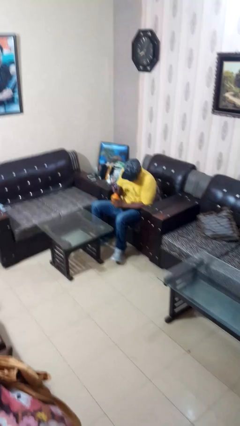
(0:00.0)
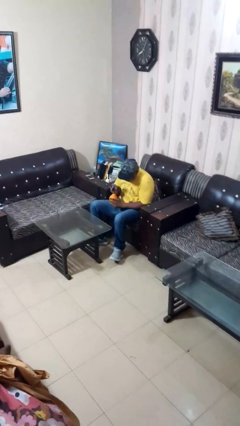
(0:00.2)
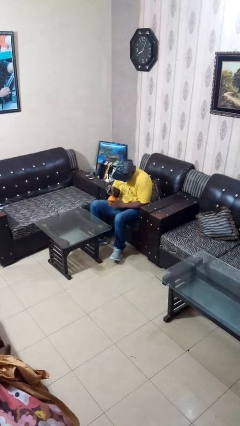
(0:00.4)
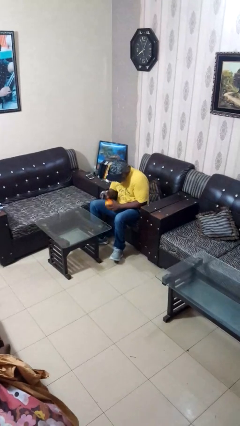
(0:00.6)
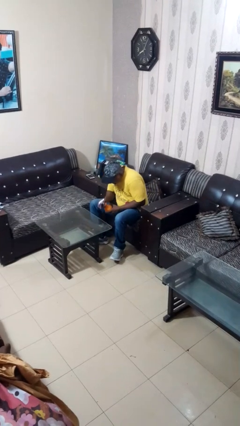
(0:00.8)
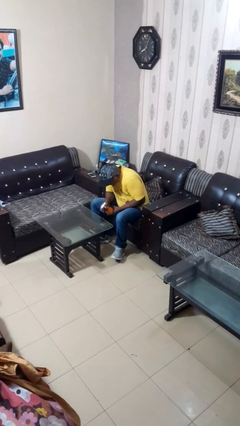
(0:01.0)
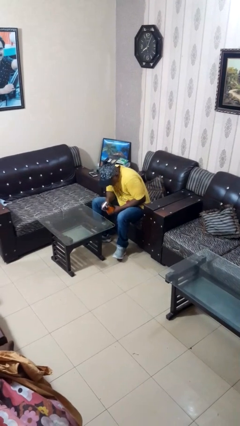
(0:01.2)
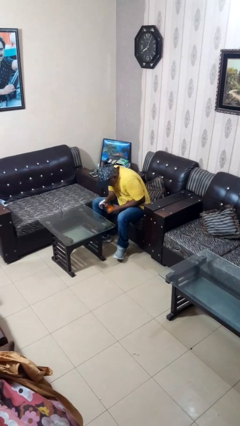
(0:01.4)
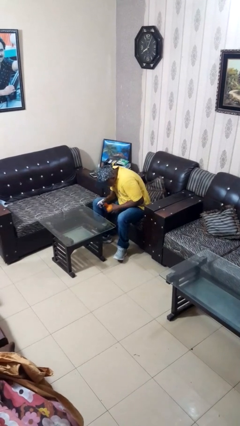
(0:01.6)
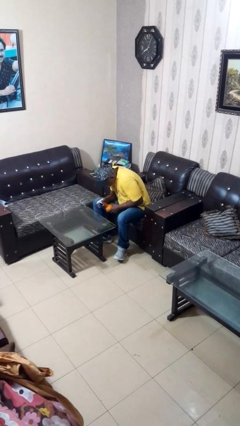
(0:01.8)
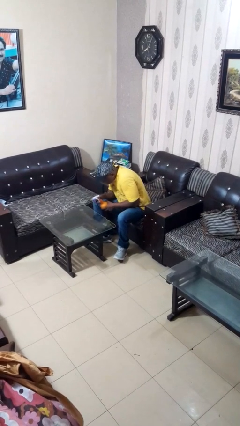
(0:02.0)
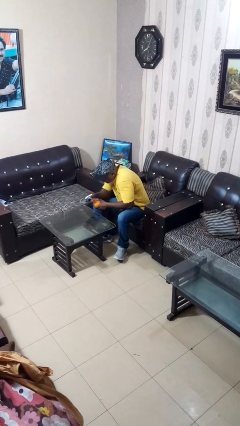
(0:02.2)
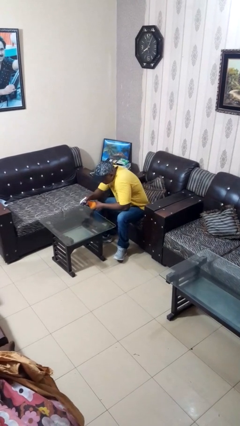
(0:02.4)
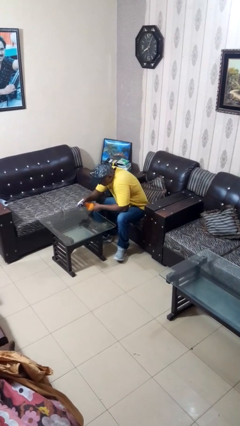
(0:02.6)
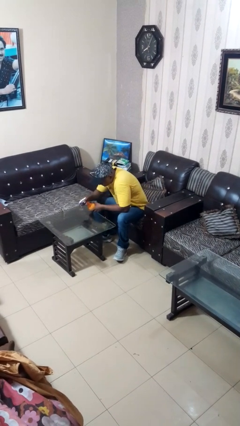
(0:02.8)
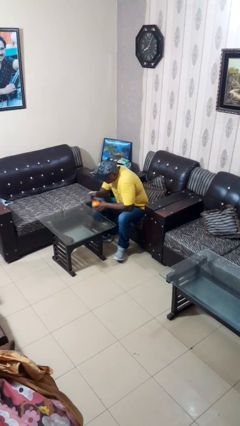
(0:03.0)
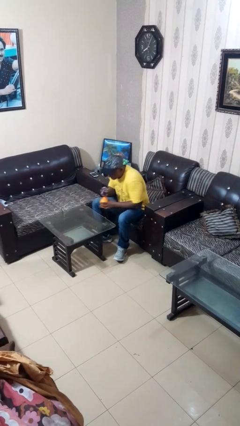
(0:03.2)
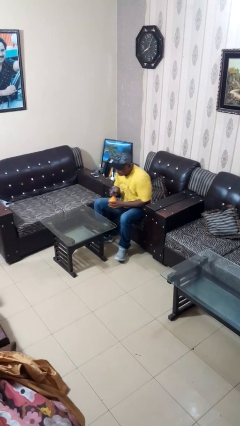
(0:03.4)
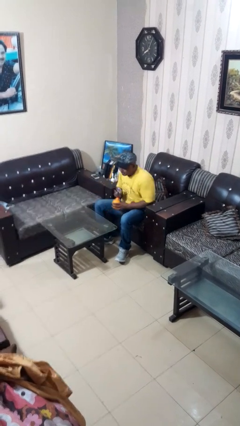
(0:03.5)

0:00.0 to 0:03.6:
person sprays from bottle

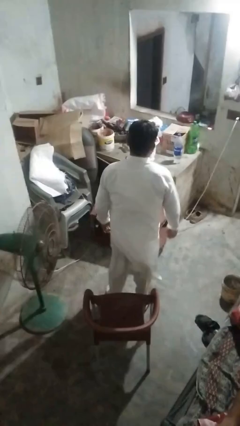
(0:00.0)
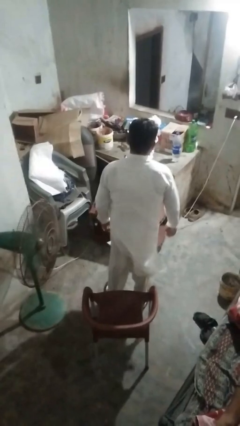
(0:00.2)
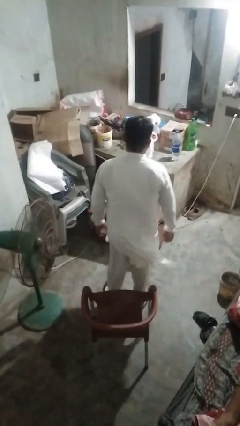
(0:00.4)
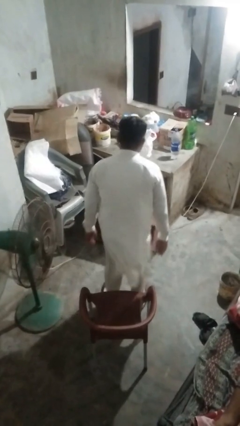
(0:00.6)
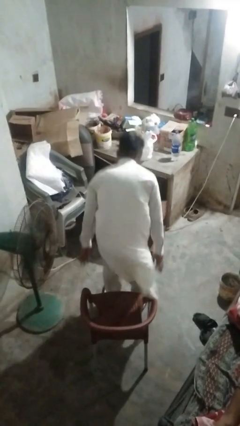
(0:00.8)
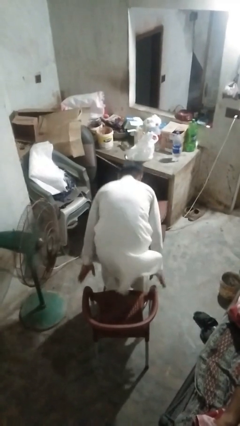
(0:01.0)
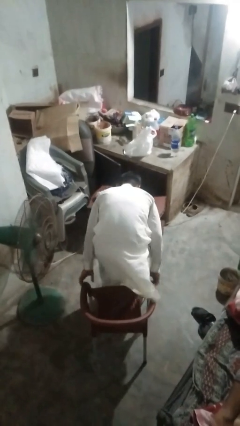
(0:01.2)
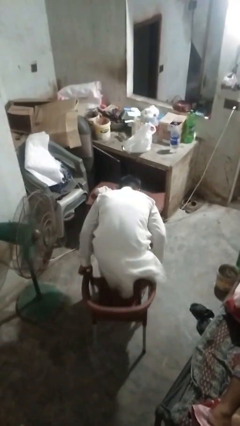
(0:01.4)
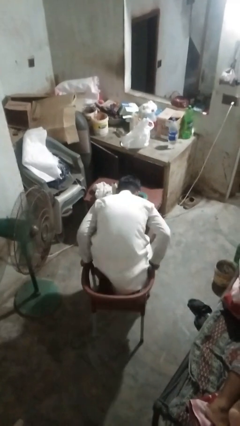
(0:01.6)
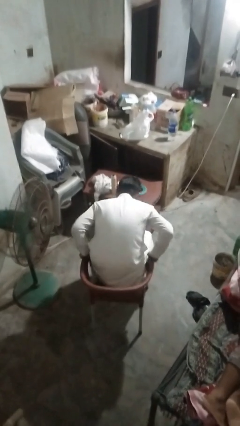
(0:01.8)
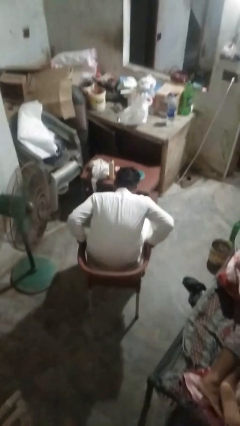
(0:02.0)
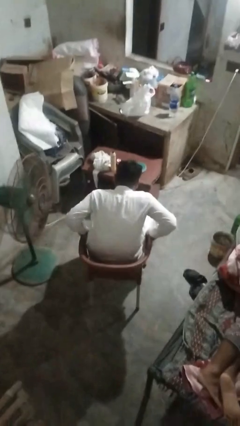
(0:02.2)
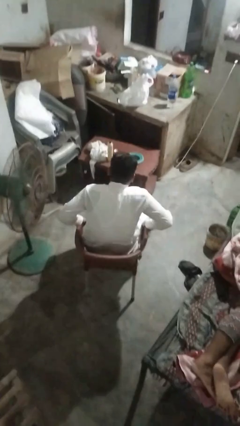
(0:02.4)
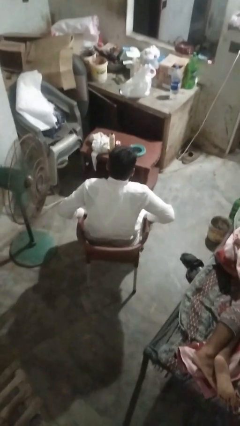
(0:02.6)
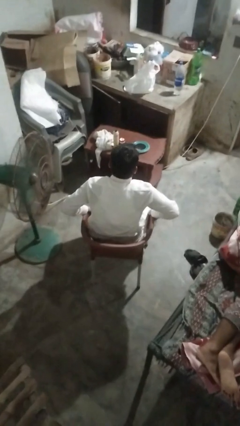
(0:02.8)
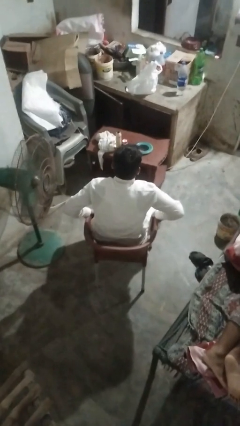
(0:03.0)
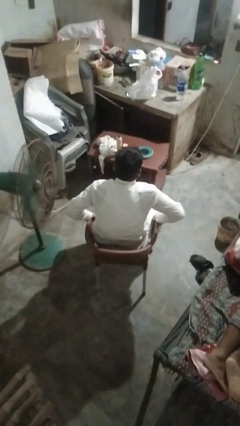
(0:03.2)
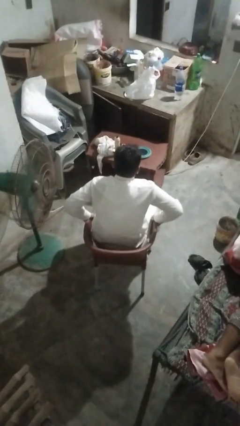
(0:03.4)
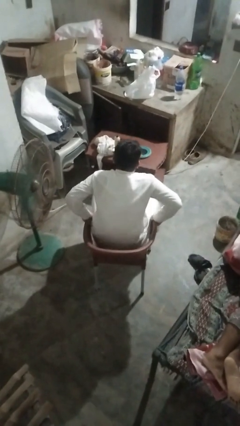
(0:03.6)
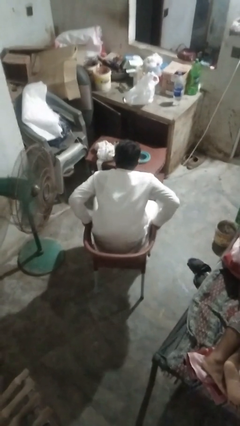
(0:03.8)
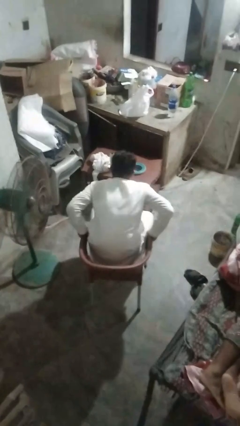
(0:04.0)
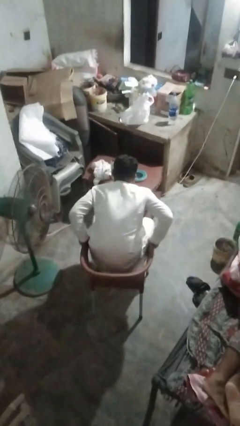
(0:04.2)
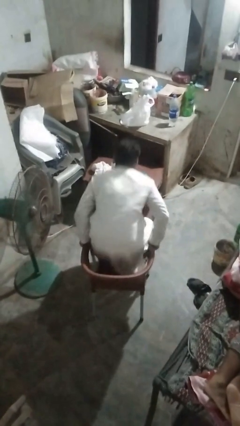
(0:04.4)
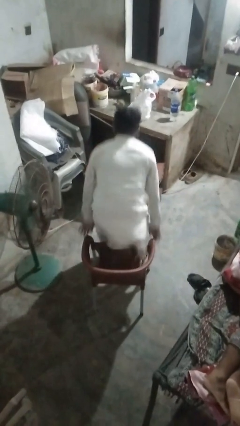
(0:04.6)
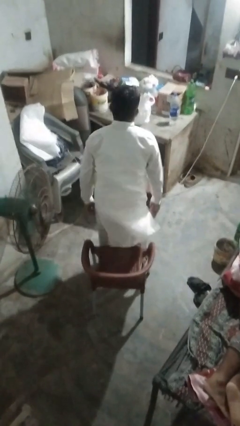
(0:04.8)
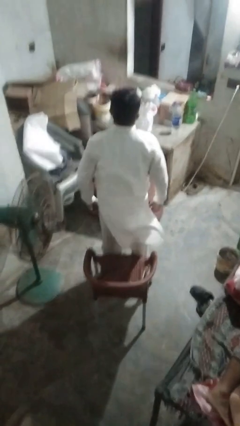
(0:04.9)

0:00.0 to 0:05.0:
person sits down

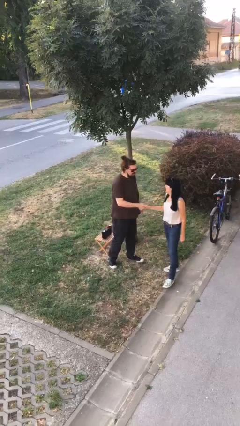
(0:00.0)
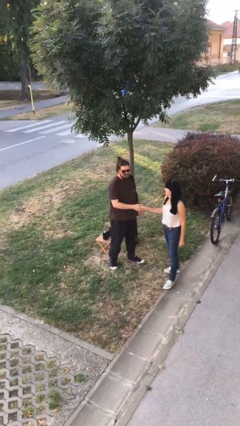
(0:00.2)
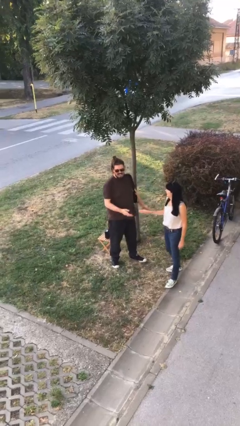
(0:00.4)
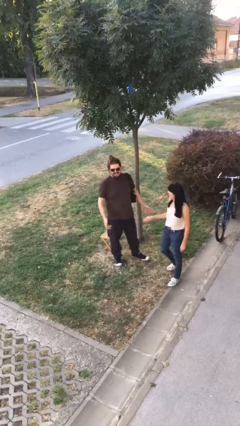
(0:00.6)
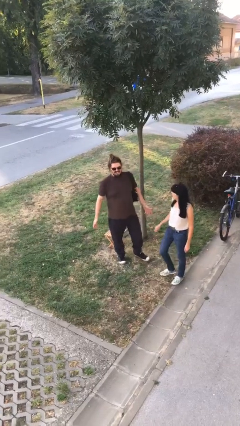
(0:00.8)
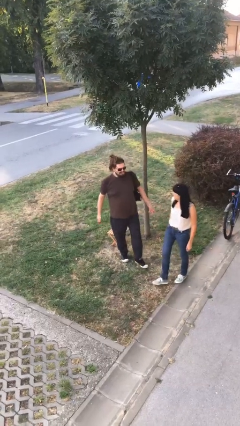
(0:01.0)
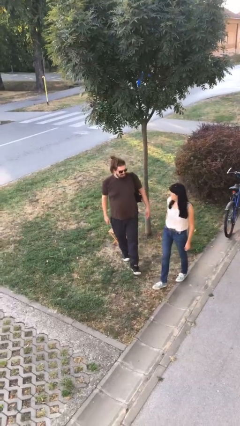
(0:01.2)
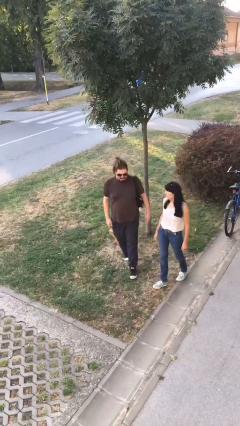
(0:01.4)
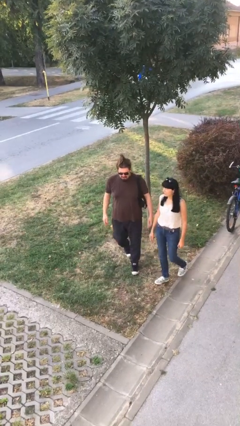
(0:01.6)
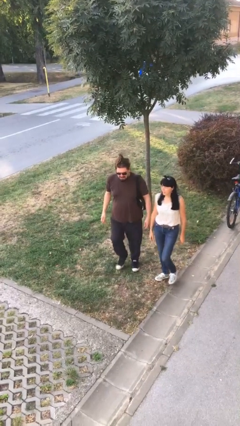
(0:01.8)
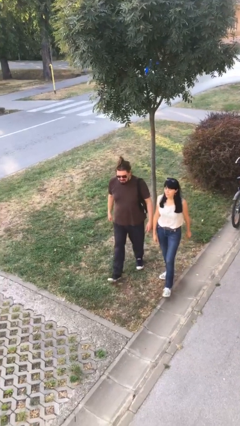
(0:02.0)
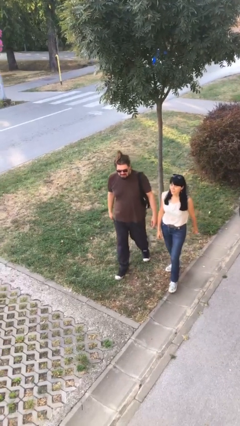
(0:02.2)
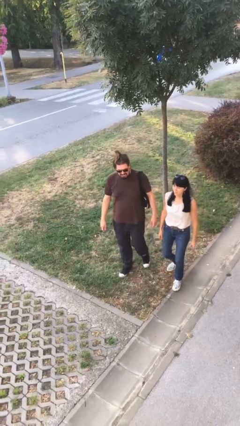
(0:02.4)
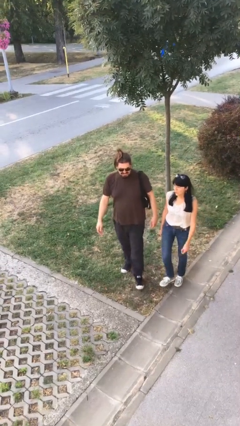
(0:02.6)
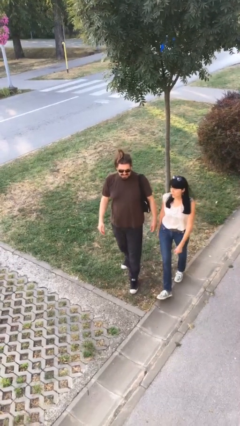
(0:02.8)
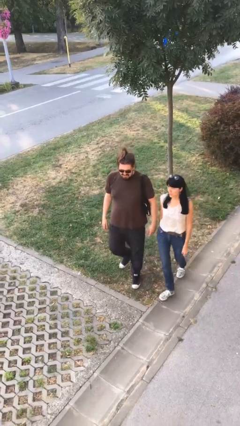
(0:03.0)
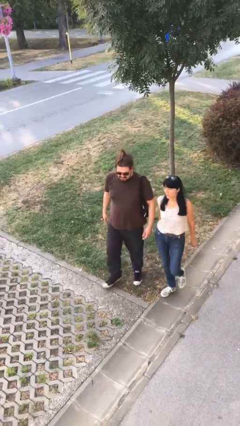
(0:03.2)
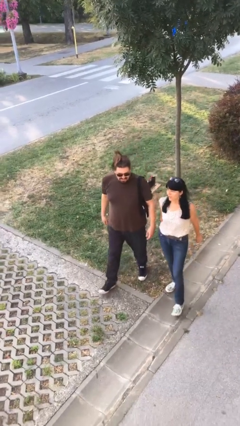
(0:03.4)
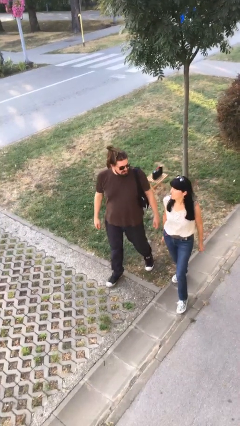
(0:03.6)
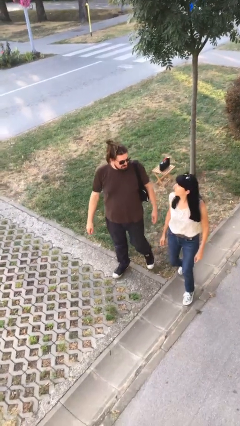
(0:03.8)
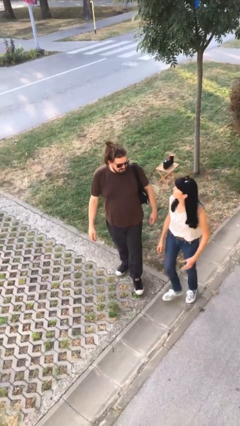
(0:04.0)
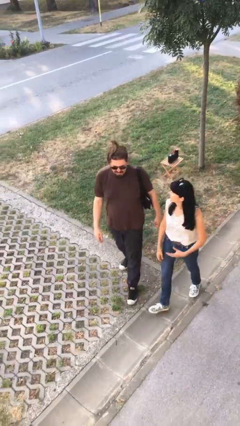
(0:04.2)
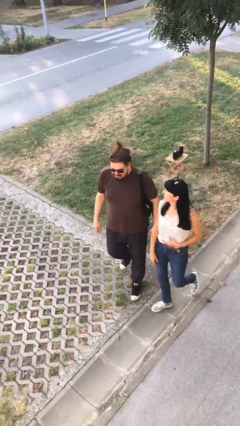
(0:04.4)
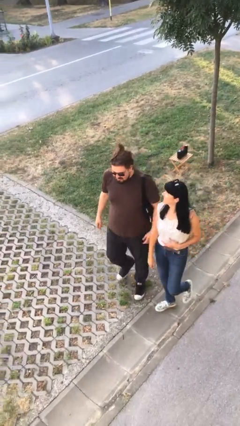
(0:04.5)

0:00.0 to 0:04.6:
person talks to person

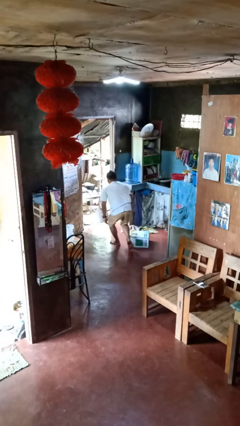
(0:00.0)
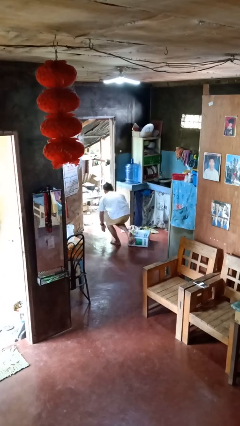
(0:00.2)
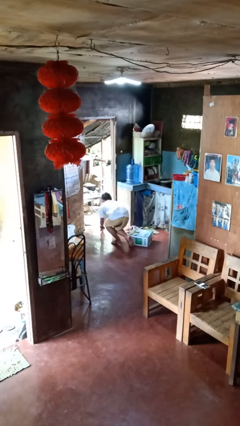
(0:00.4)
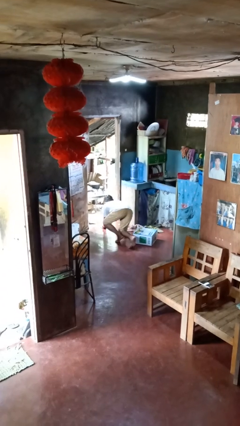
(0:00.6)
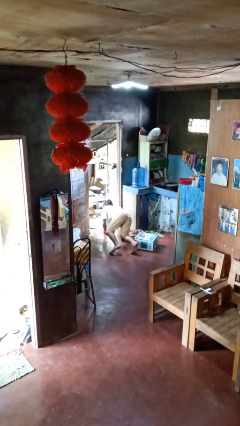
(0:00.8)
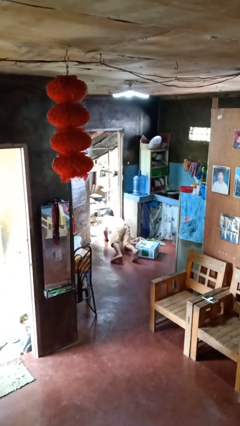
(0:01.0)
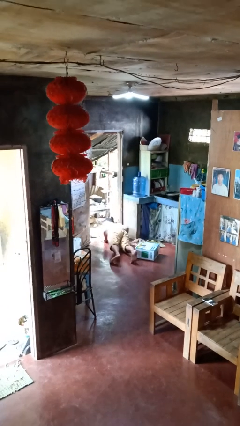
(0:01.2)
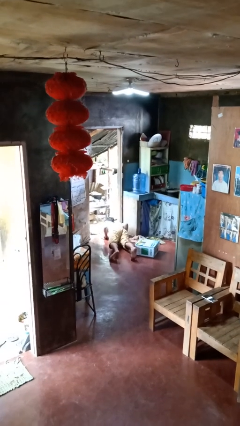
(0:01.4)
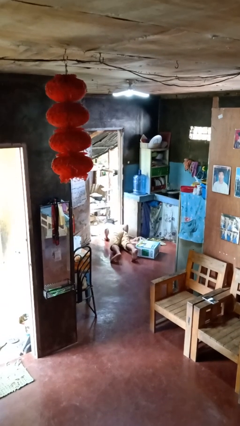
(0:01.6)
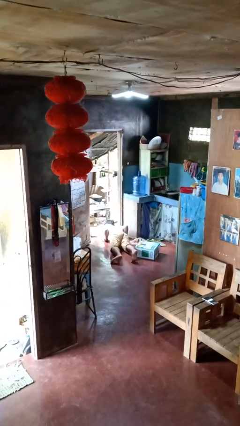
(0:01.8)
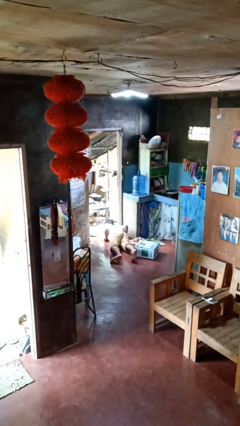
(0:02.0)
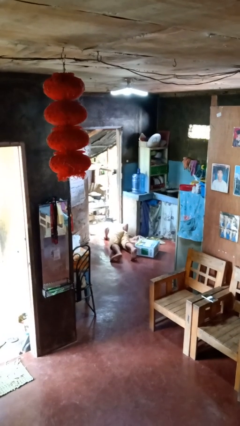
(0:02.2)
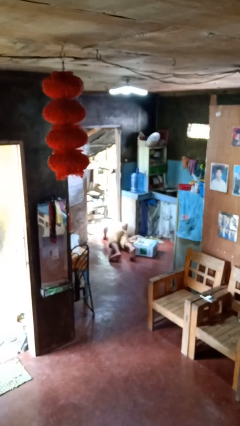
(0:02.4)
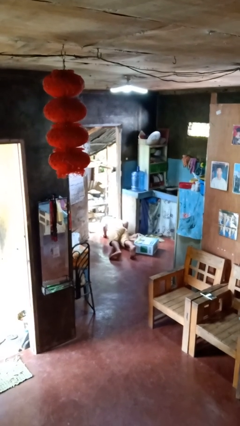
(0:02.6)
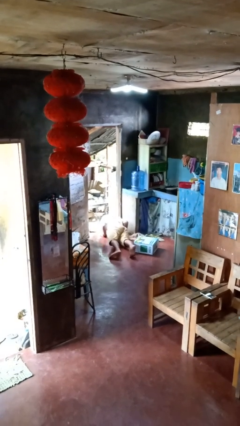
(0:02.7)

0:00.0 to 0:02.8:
person trips on object on floor

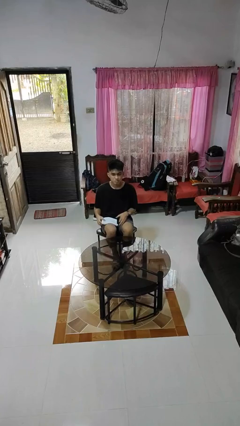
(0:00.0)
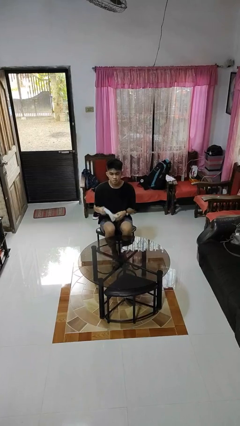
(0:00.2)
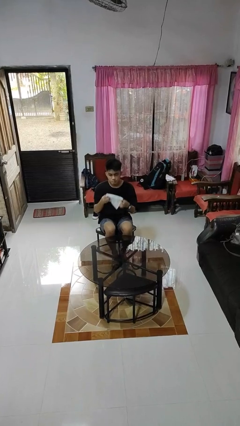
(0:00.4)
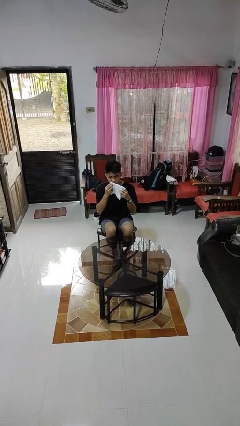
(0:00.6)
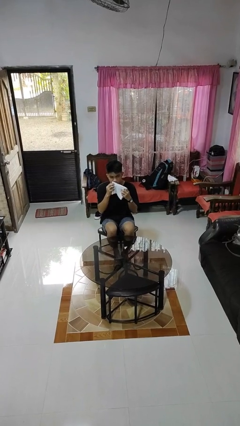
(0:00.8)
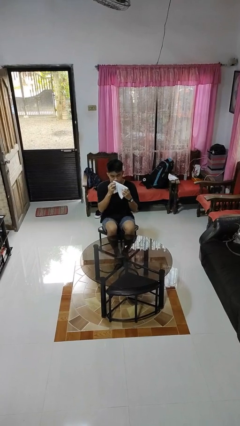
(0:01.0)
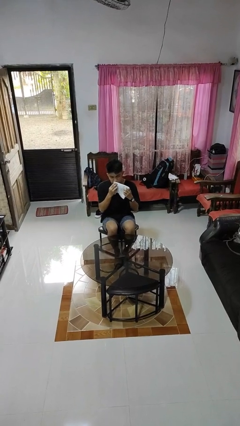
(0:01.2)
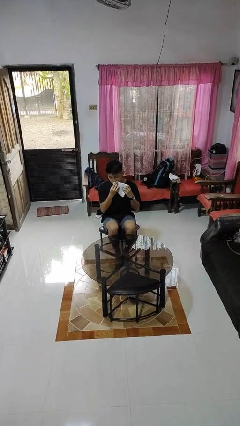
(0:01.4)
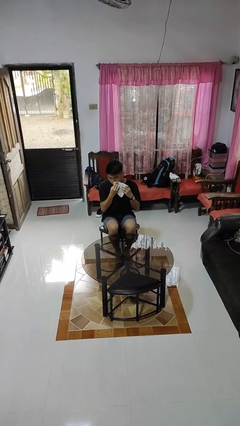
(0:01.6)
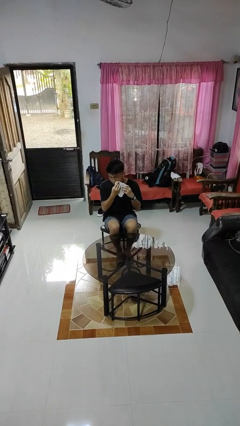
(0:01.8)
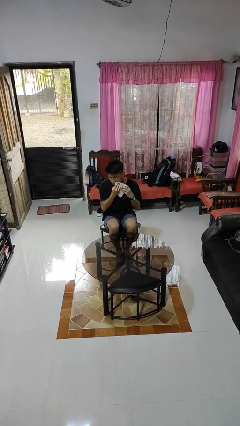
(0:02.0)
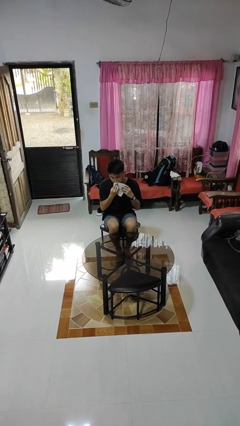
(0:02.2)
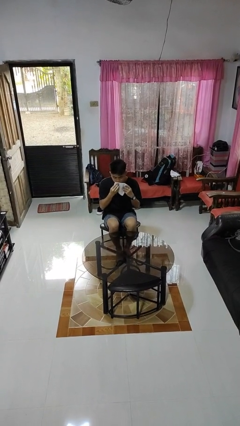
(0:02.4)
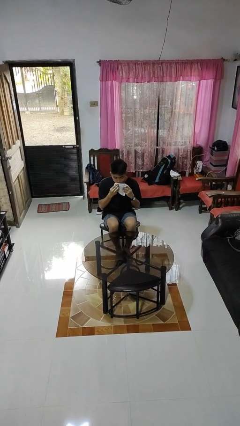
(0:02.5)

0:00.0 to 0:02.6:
person wipes mouth with napkin
